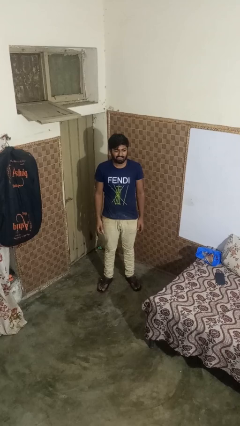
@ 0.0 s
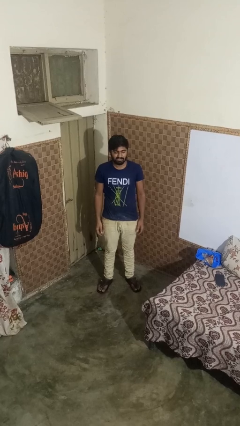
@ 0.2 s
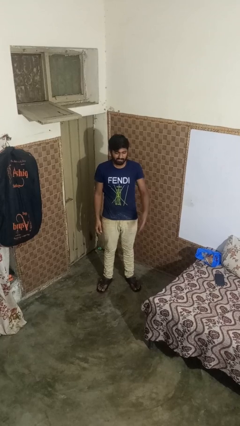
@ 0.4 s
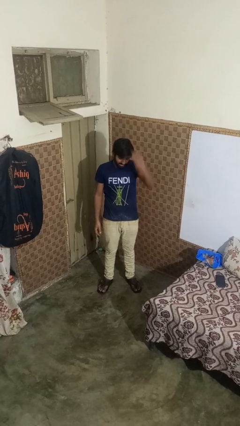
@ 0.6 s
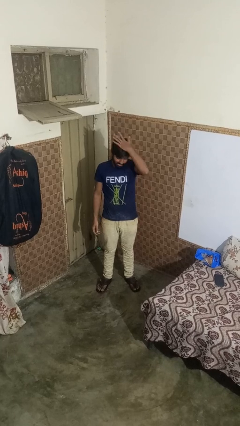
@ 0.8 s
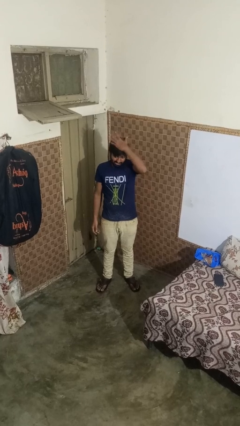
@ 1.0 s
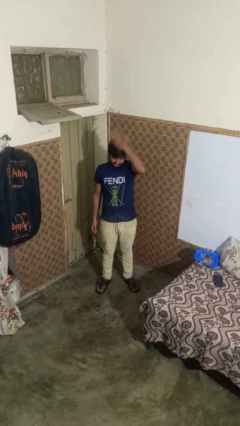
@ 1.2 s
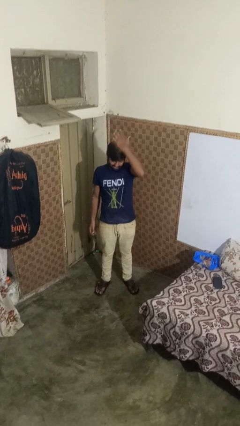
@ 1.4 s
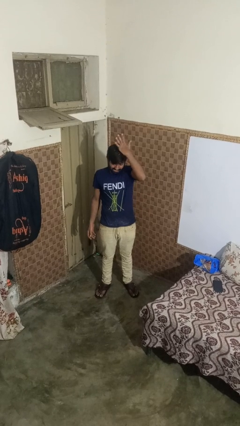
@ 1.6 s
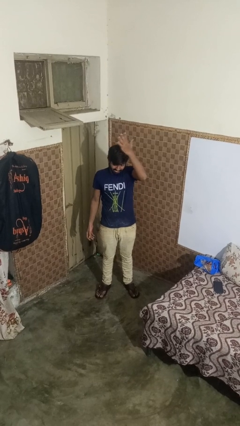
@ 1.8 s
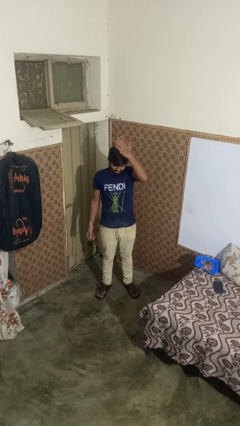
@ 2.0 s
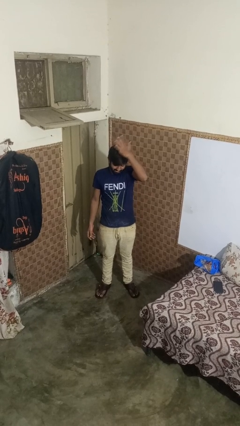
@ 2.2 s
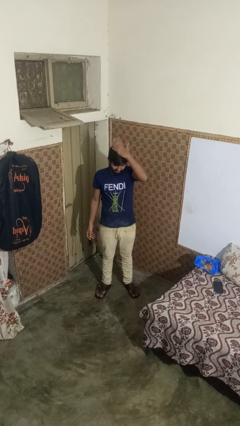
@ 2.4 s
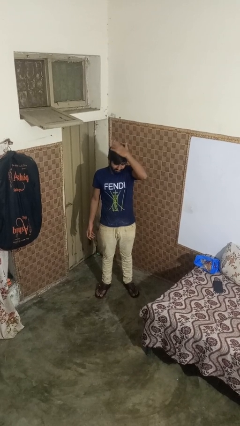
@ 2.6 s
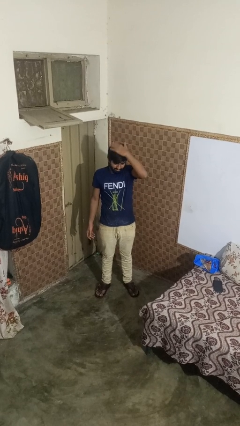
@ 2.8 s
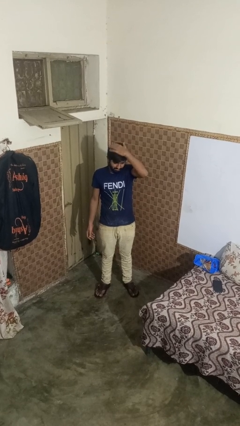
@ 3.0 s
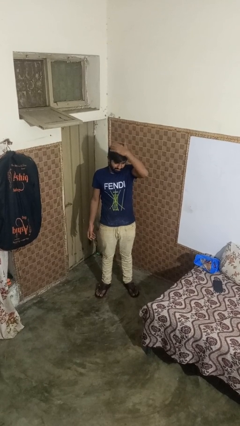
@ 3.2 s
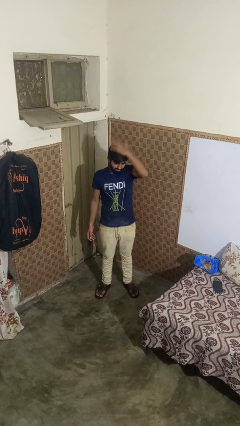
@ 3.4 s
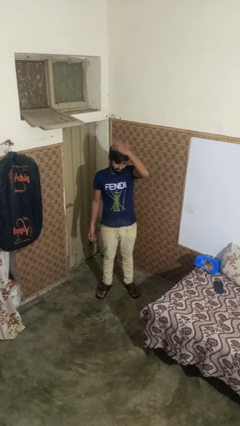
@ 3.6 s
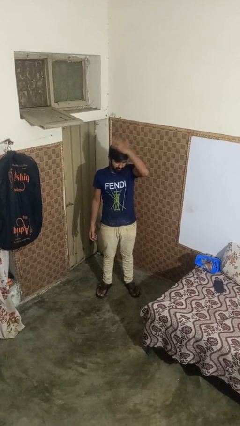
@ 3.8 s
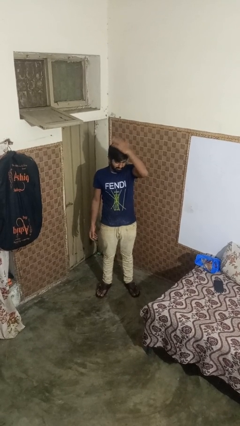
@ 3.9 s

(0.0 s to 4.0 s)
person pats head

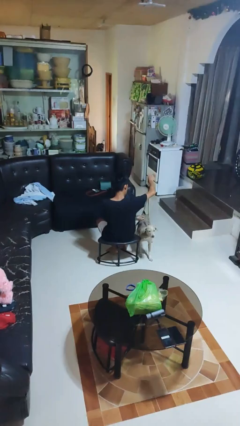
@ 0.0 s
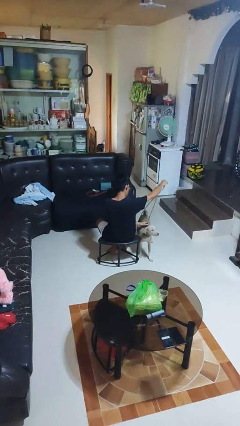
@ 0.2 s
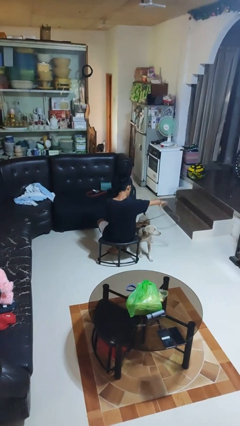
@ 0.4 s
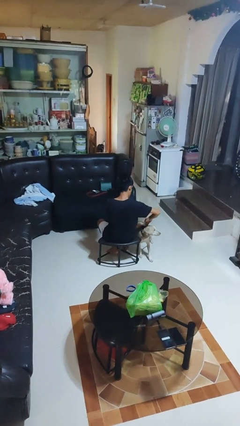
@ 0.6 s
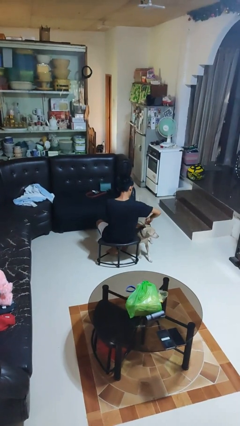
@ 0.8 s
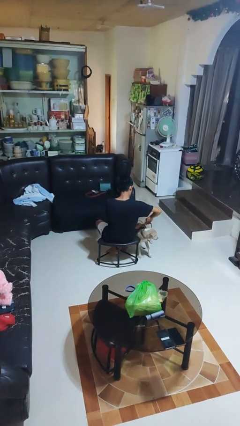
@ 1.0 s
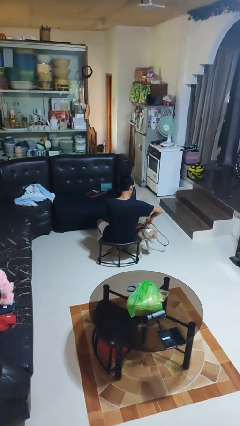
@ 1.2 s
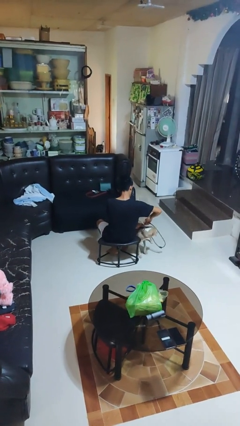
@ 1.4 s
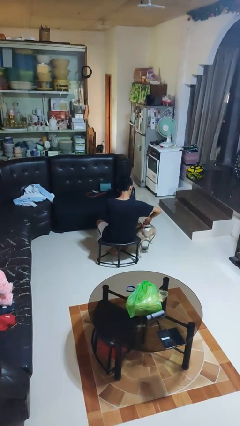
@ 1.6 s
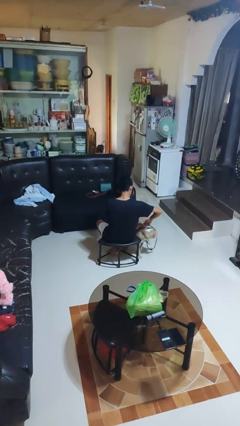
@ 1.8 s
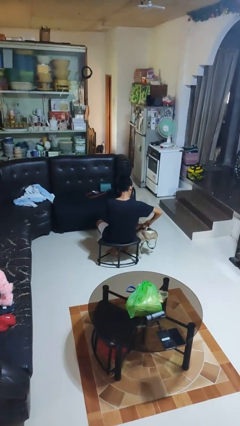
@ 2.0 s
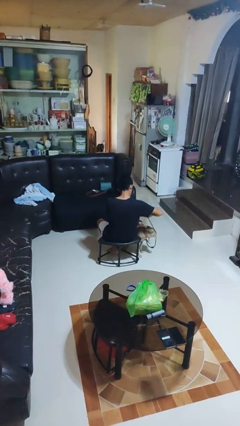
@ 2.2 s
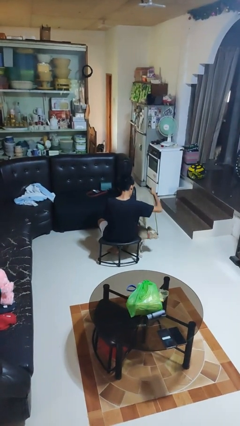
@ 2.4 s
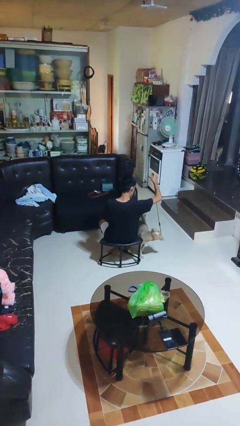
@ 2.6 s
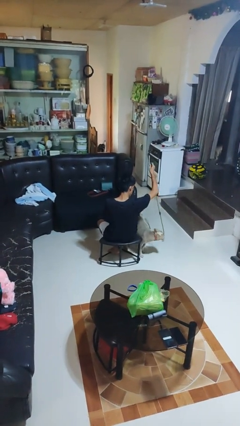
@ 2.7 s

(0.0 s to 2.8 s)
person unattaches leash from dog

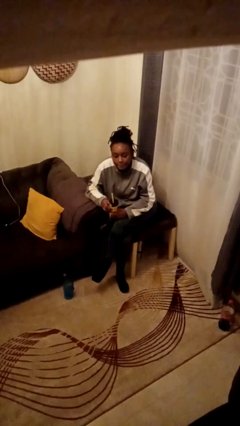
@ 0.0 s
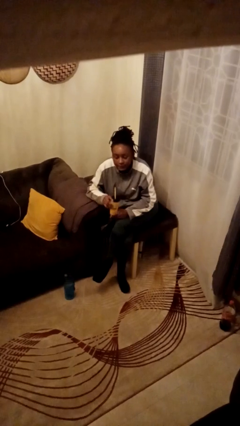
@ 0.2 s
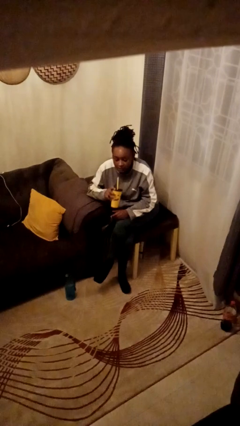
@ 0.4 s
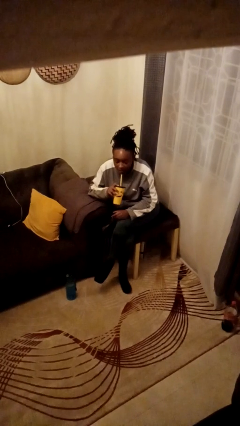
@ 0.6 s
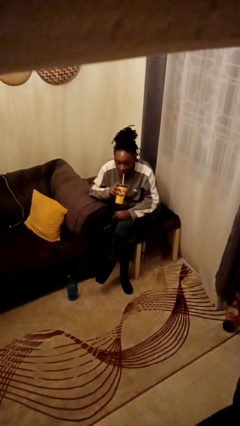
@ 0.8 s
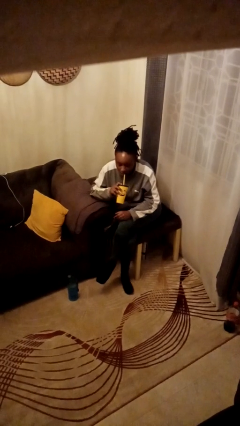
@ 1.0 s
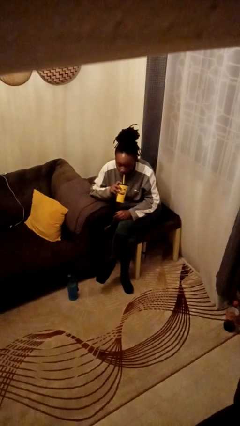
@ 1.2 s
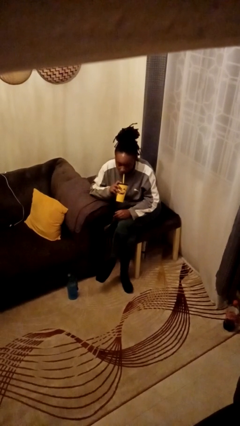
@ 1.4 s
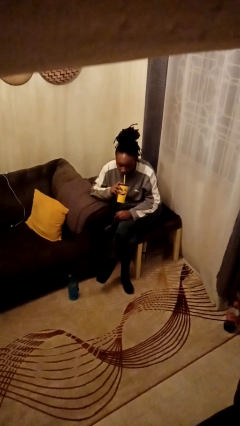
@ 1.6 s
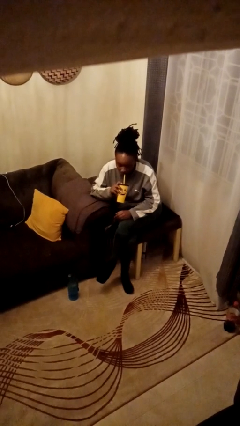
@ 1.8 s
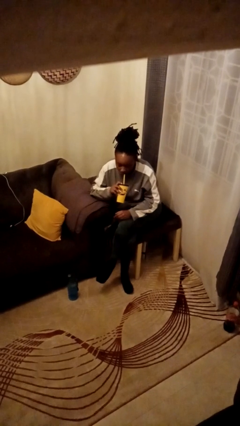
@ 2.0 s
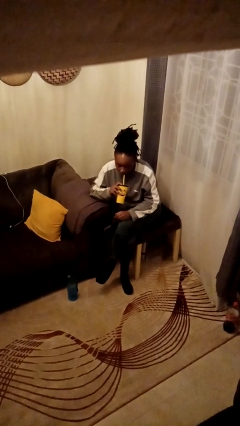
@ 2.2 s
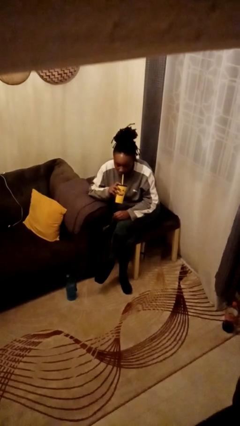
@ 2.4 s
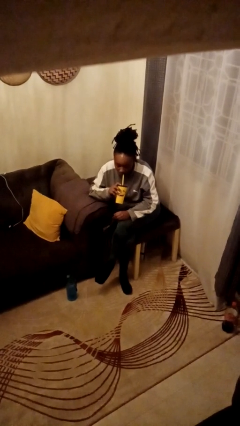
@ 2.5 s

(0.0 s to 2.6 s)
person drinks from straw

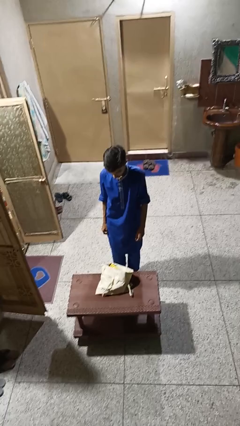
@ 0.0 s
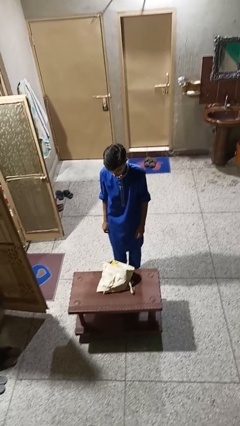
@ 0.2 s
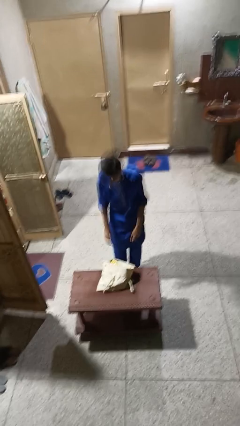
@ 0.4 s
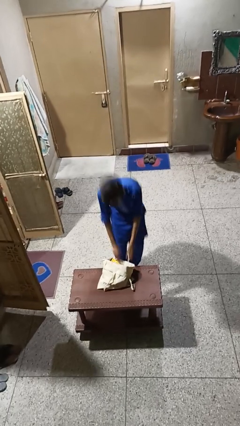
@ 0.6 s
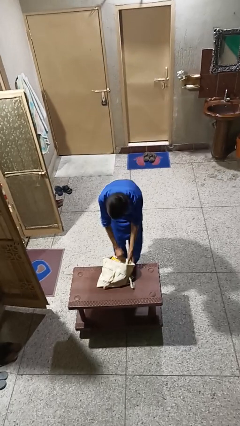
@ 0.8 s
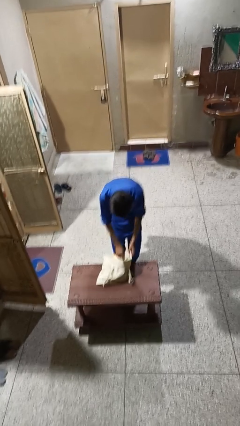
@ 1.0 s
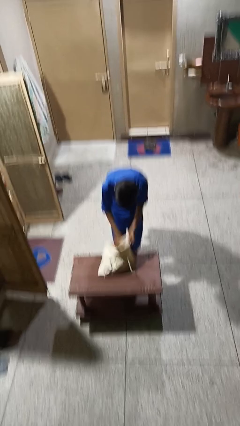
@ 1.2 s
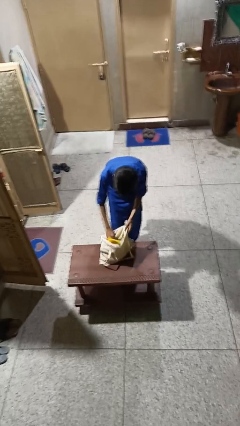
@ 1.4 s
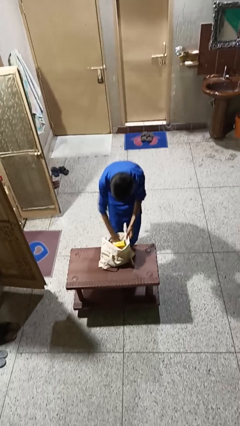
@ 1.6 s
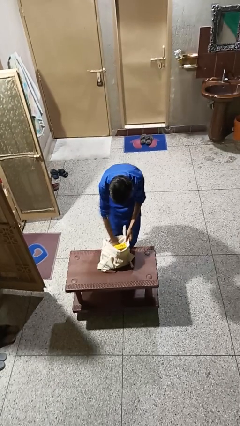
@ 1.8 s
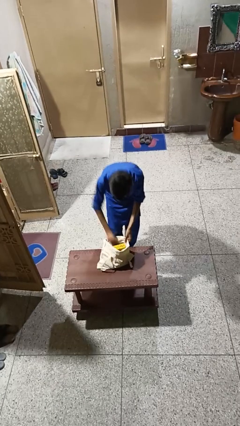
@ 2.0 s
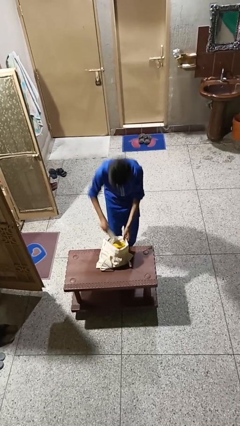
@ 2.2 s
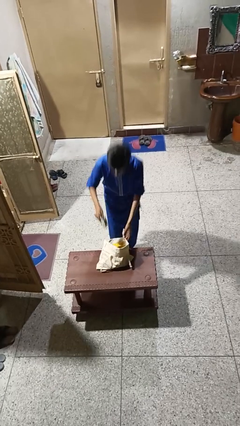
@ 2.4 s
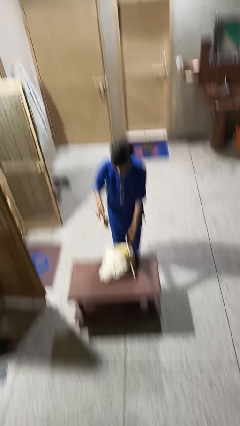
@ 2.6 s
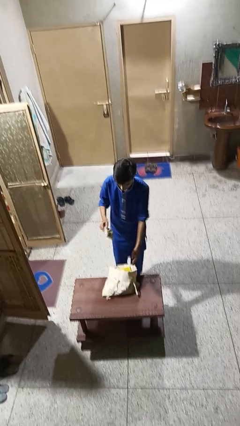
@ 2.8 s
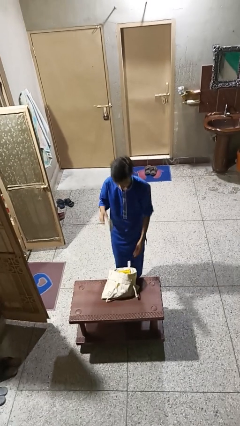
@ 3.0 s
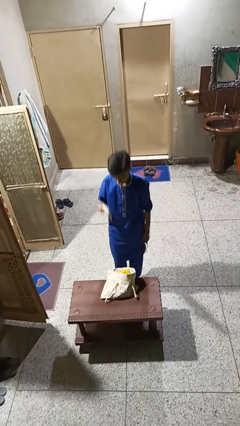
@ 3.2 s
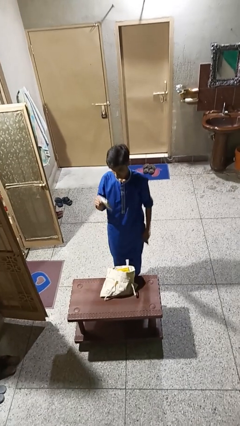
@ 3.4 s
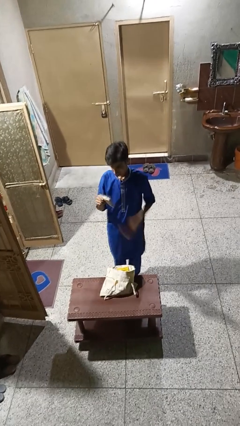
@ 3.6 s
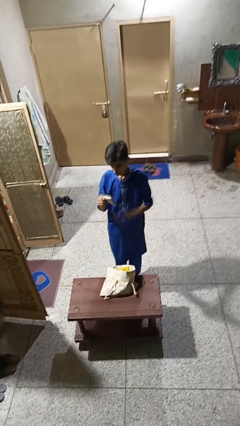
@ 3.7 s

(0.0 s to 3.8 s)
person takes object from bag

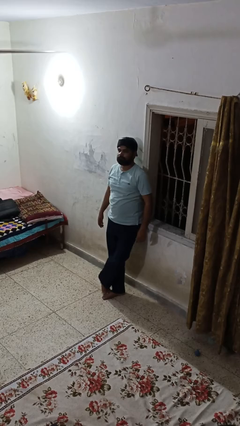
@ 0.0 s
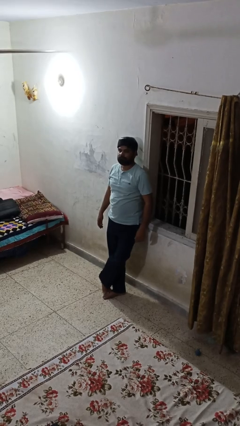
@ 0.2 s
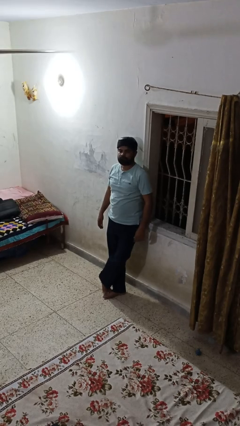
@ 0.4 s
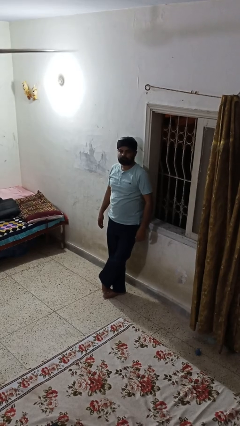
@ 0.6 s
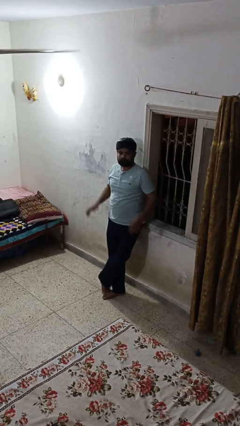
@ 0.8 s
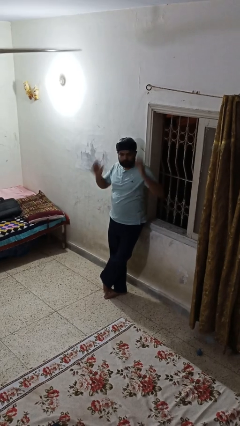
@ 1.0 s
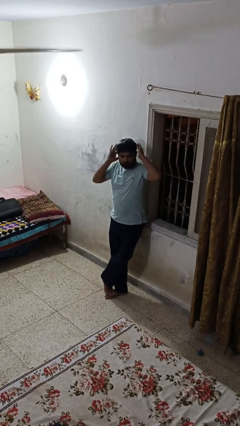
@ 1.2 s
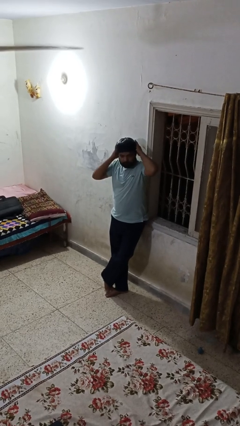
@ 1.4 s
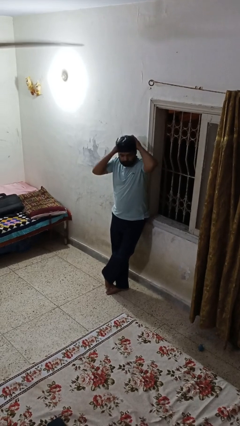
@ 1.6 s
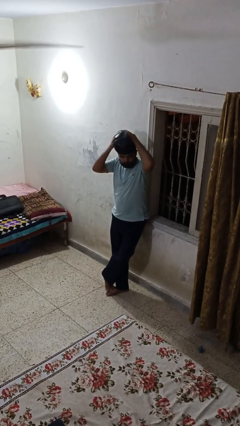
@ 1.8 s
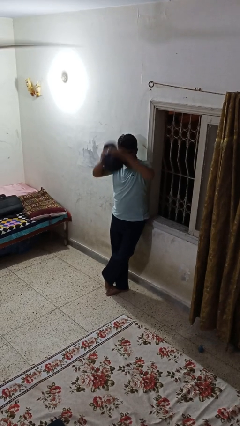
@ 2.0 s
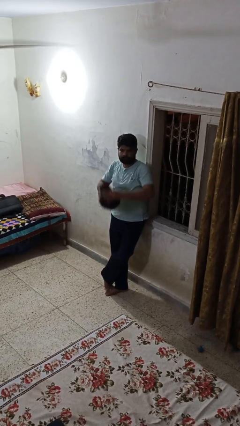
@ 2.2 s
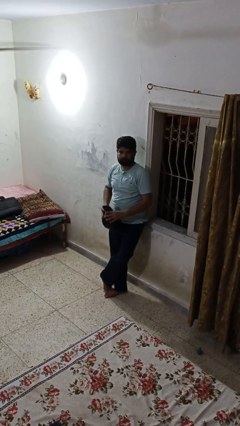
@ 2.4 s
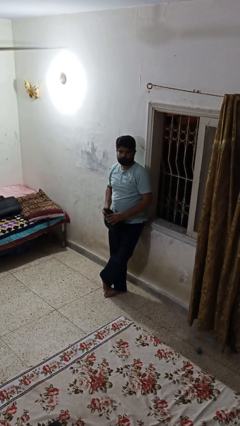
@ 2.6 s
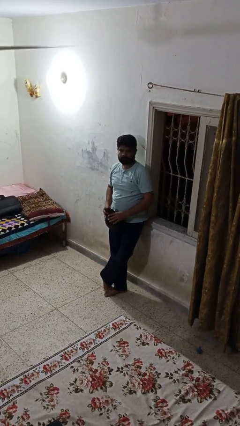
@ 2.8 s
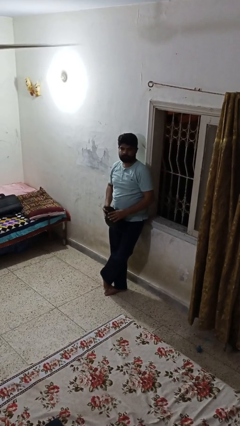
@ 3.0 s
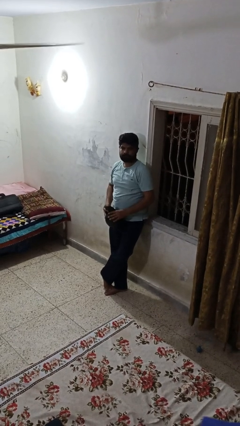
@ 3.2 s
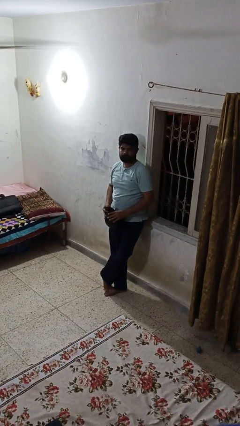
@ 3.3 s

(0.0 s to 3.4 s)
person takes off hat

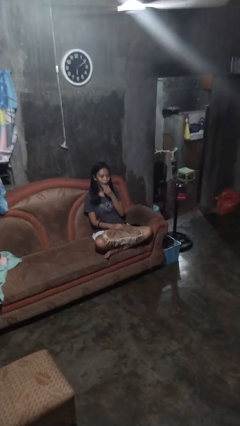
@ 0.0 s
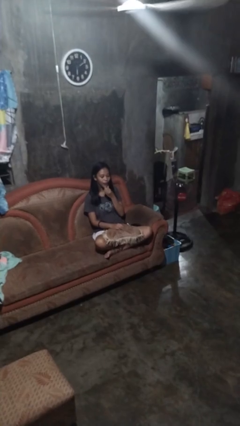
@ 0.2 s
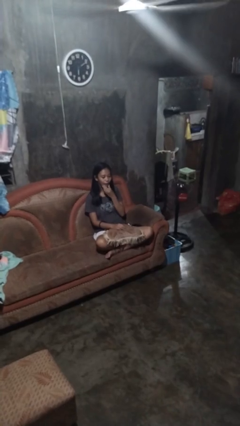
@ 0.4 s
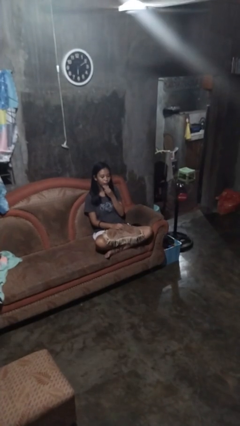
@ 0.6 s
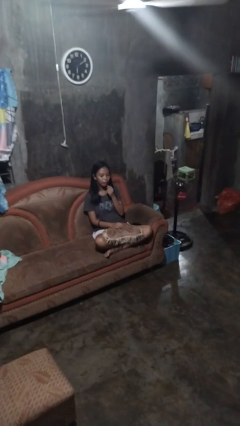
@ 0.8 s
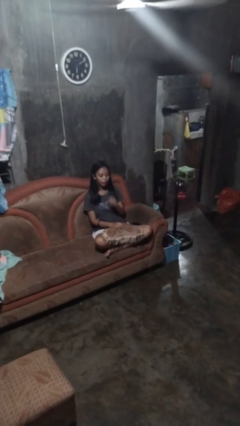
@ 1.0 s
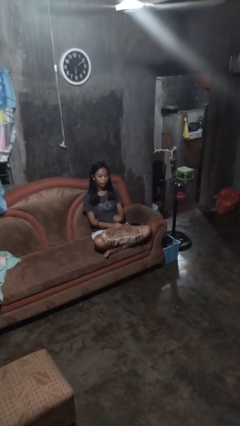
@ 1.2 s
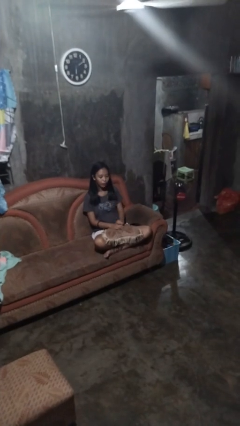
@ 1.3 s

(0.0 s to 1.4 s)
person strokes chin
